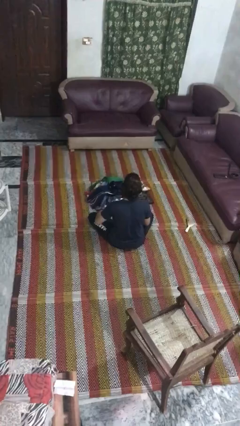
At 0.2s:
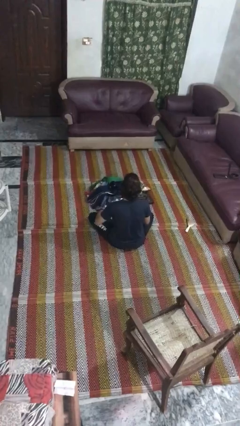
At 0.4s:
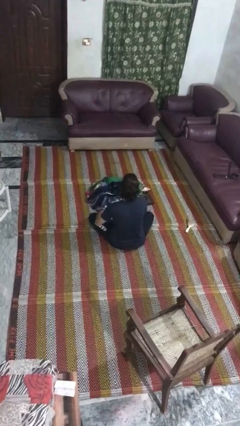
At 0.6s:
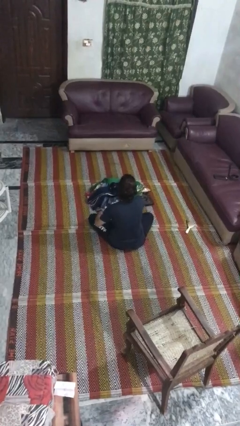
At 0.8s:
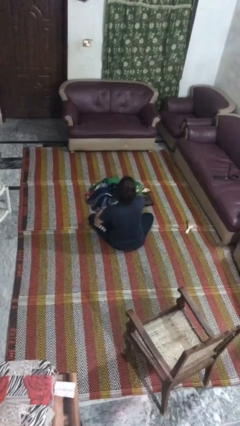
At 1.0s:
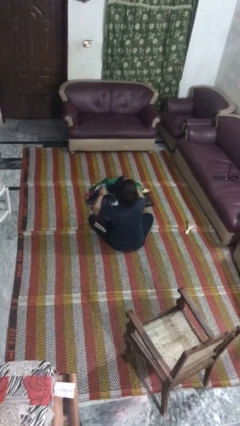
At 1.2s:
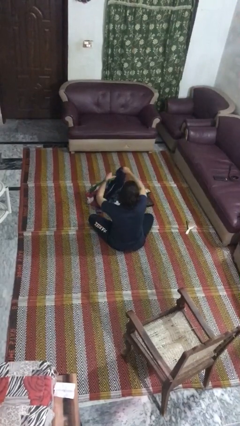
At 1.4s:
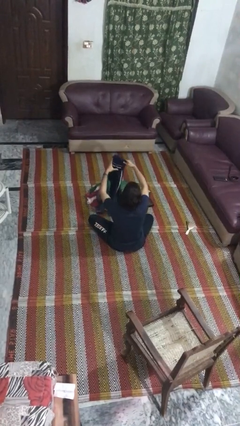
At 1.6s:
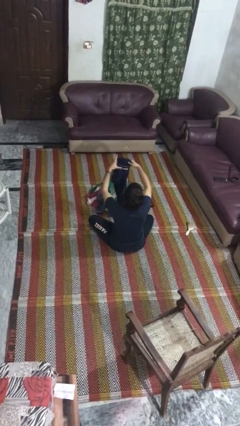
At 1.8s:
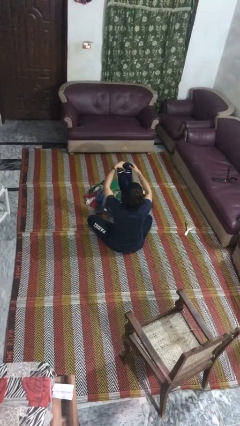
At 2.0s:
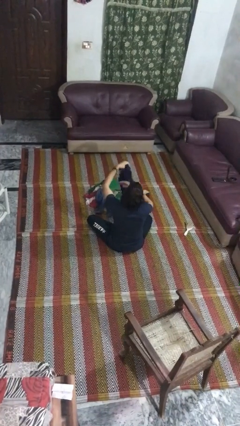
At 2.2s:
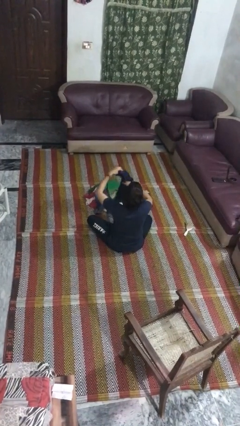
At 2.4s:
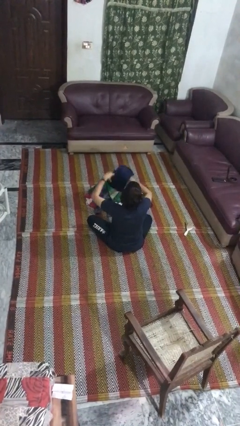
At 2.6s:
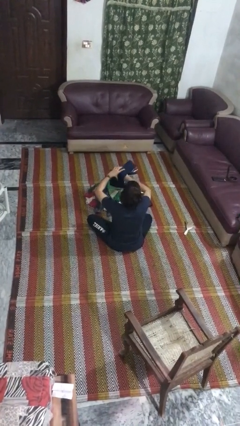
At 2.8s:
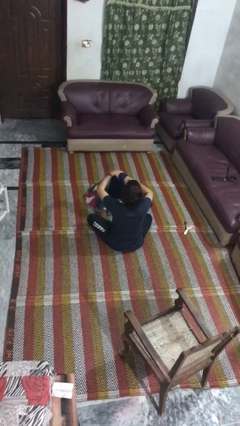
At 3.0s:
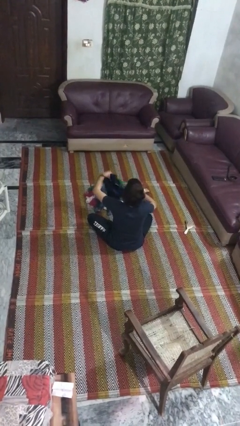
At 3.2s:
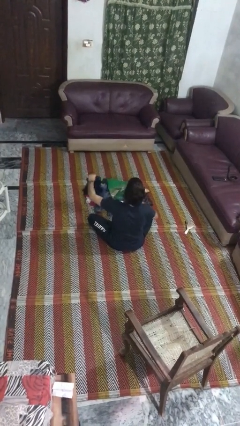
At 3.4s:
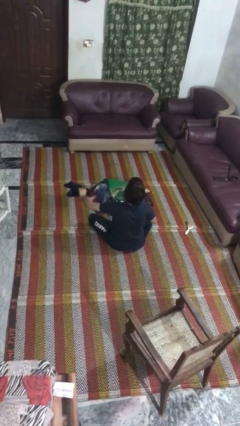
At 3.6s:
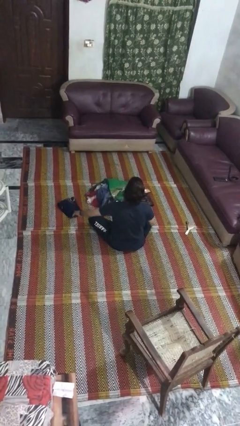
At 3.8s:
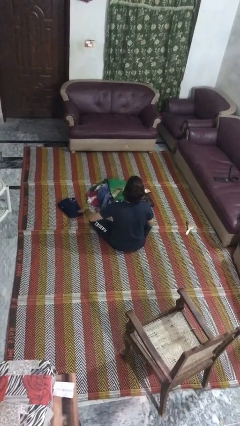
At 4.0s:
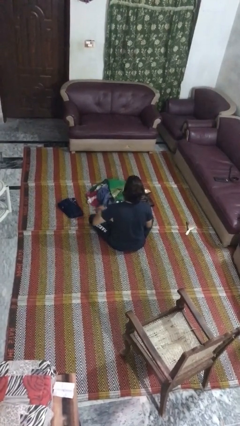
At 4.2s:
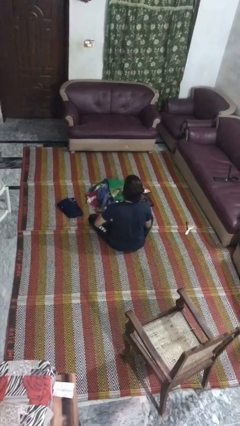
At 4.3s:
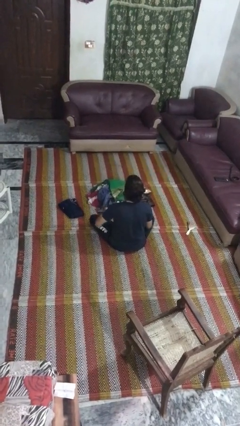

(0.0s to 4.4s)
person folds pants

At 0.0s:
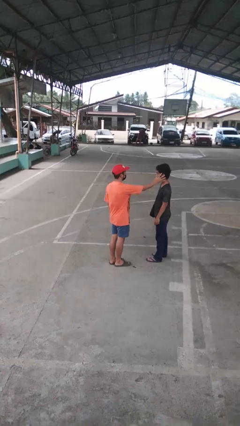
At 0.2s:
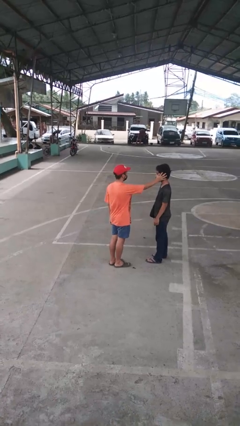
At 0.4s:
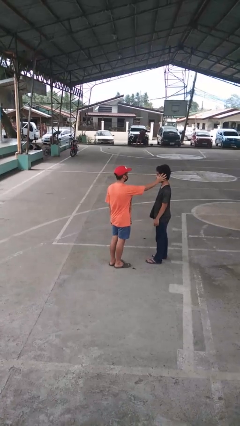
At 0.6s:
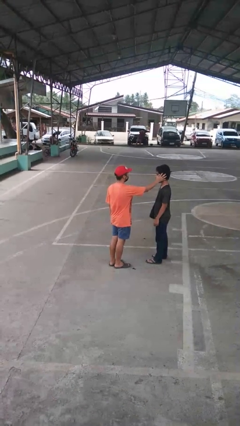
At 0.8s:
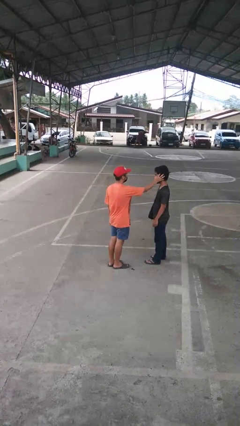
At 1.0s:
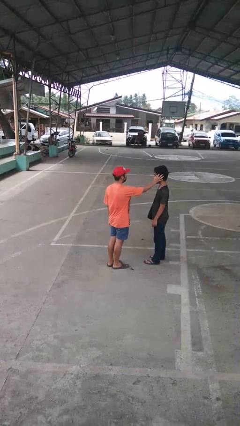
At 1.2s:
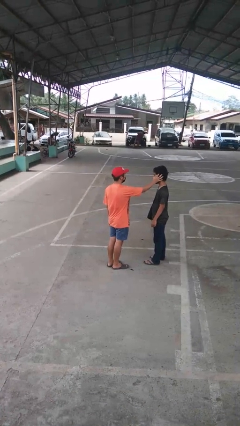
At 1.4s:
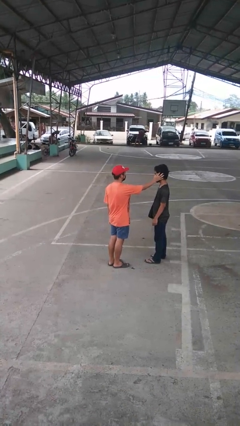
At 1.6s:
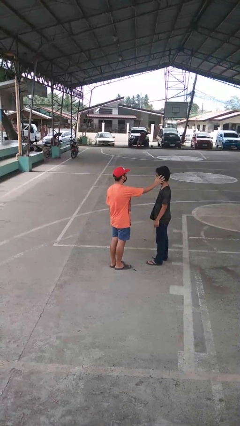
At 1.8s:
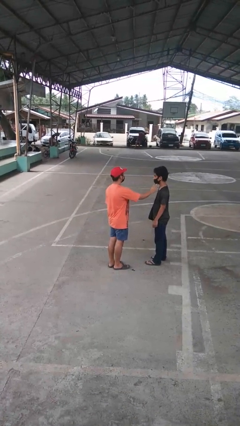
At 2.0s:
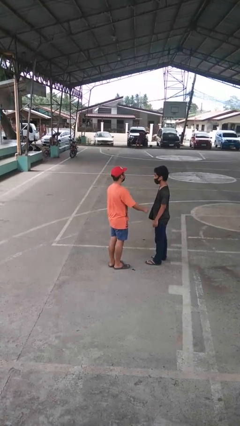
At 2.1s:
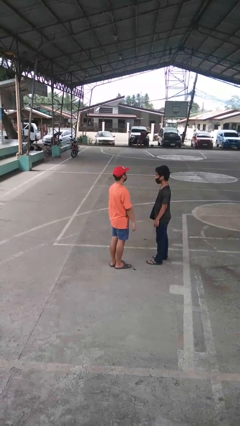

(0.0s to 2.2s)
person touches face of person

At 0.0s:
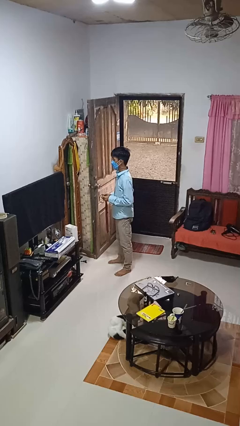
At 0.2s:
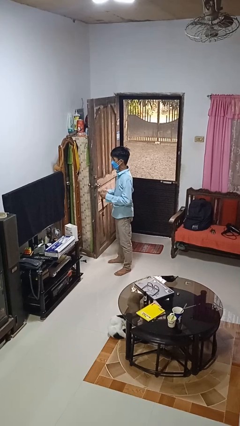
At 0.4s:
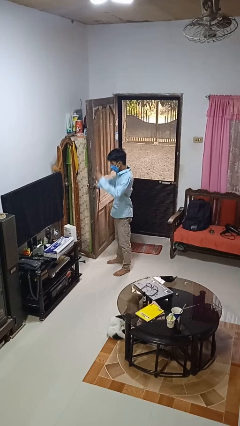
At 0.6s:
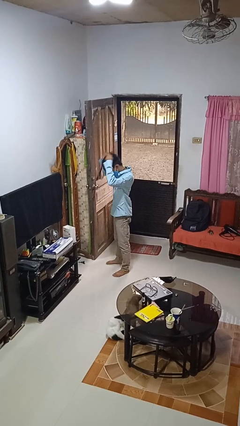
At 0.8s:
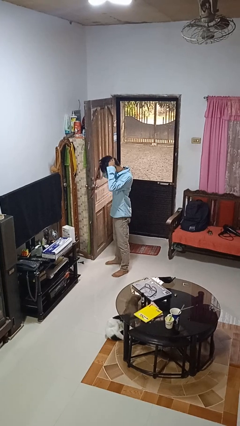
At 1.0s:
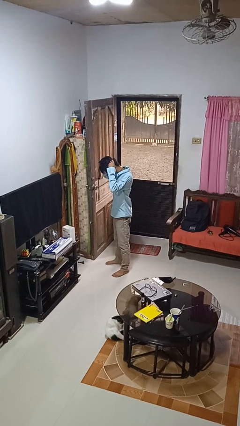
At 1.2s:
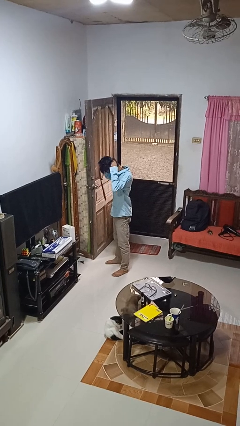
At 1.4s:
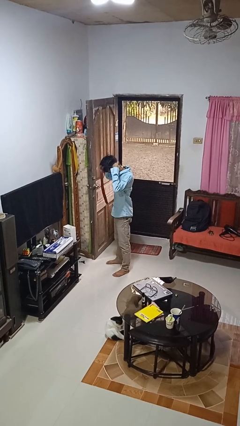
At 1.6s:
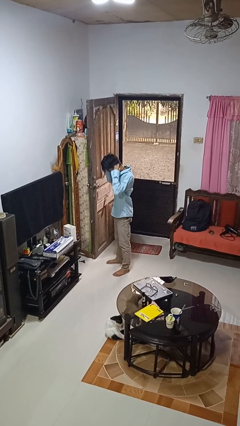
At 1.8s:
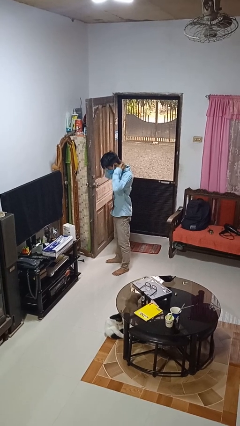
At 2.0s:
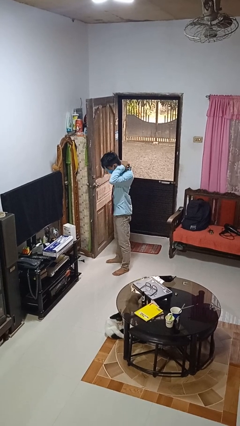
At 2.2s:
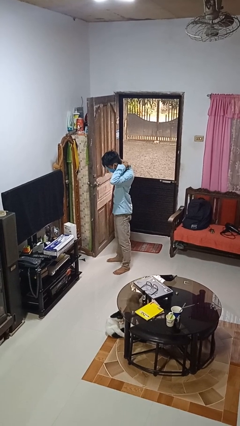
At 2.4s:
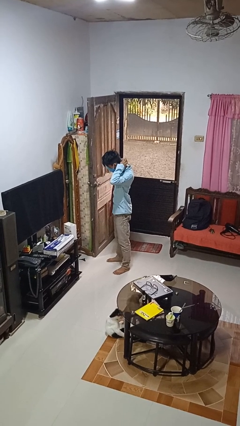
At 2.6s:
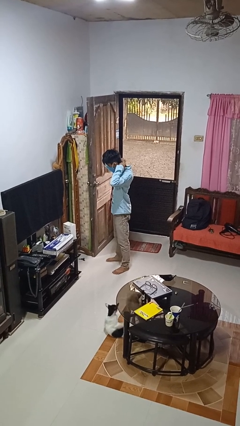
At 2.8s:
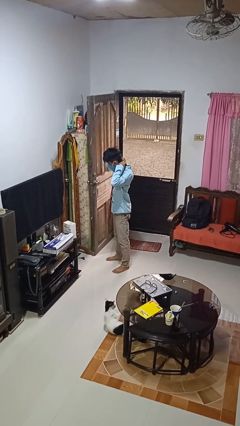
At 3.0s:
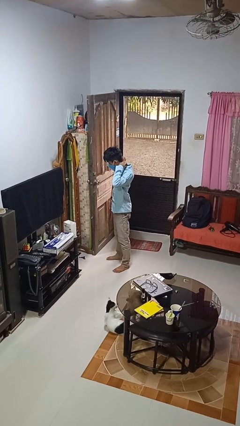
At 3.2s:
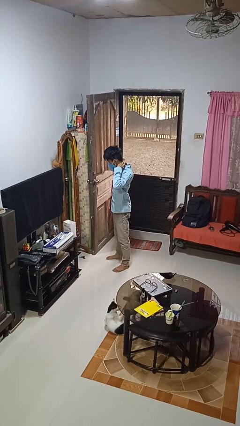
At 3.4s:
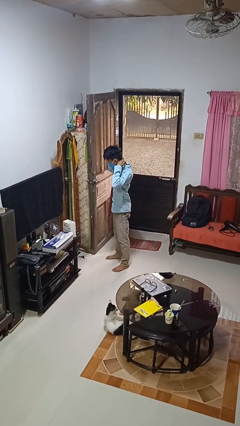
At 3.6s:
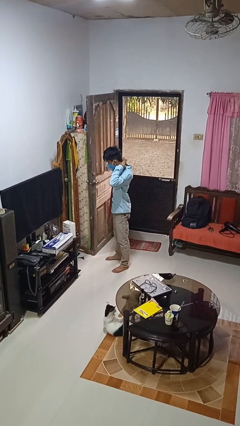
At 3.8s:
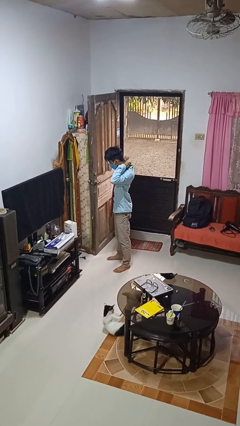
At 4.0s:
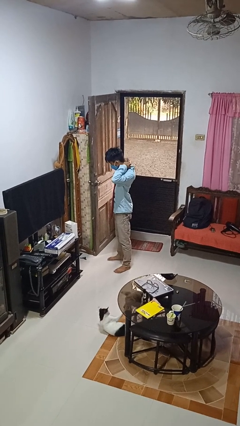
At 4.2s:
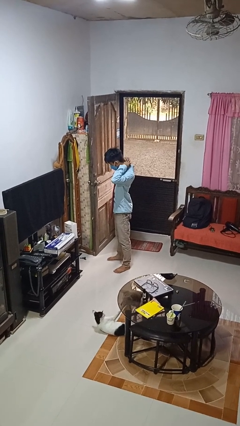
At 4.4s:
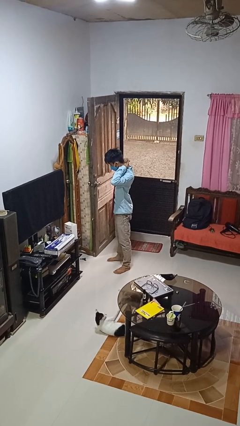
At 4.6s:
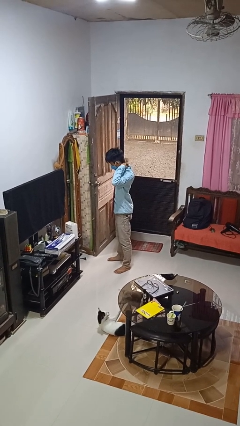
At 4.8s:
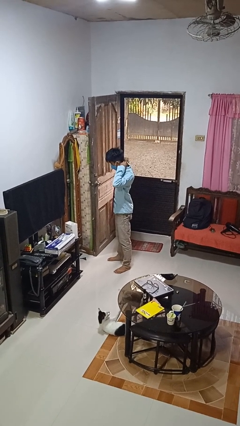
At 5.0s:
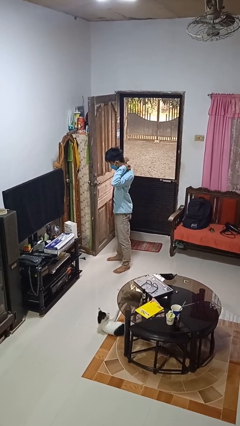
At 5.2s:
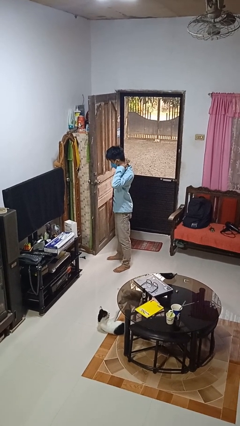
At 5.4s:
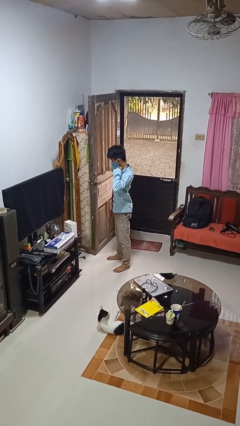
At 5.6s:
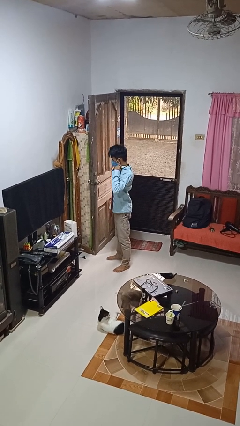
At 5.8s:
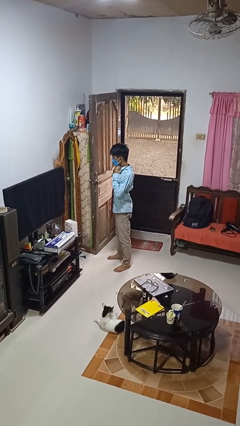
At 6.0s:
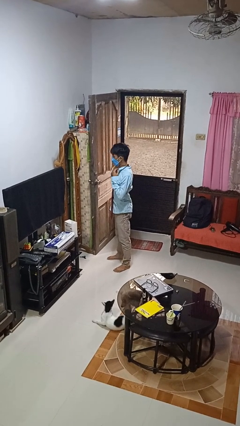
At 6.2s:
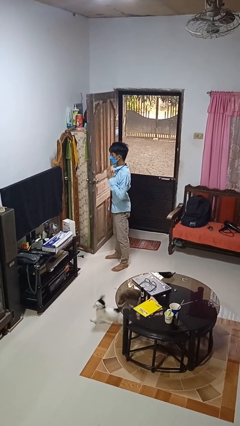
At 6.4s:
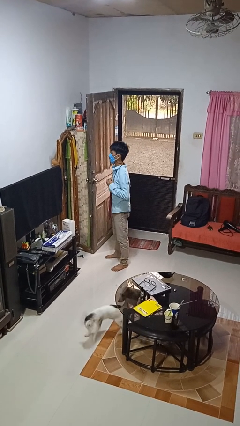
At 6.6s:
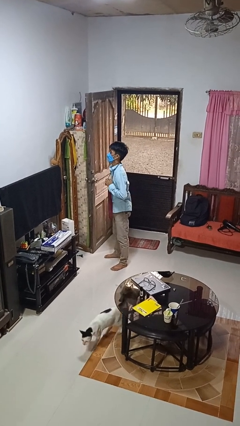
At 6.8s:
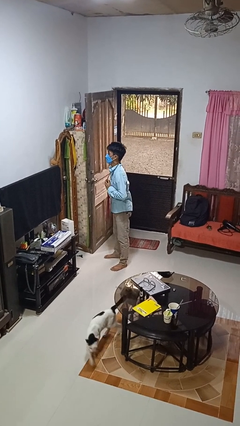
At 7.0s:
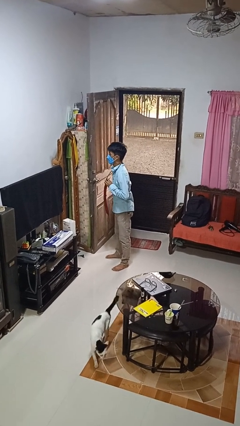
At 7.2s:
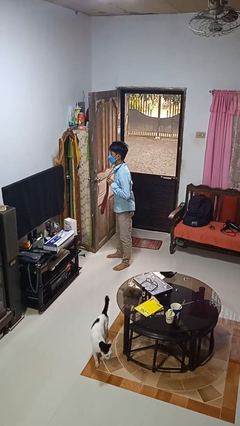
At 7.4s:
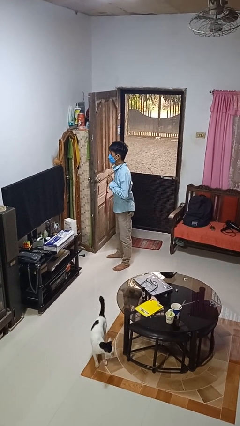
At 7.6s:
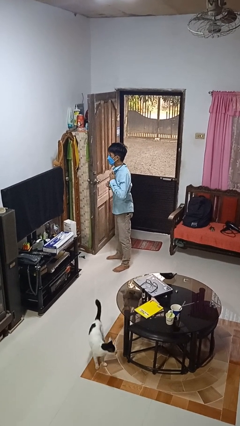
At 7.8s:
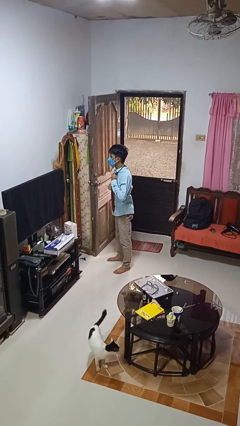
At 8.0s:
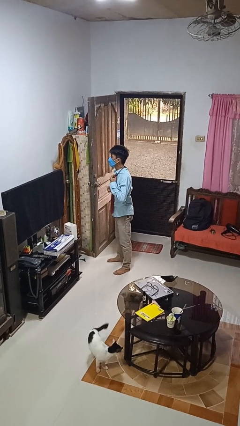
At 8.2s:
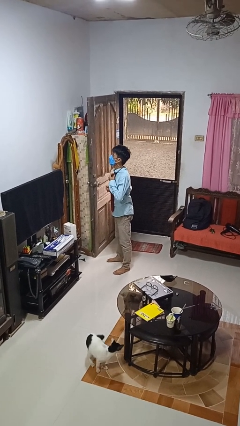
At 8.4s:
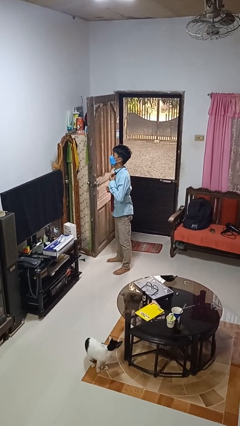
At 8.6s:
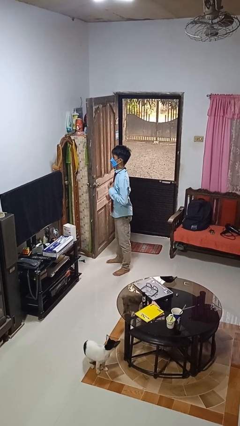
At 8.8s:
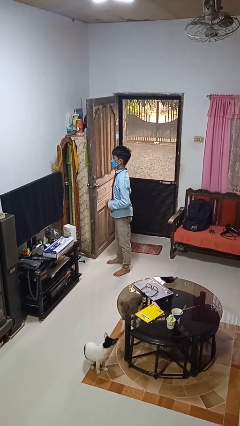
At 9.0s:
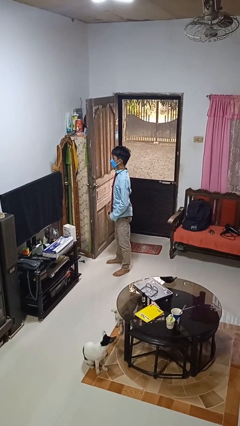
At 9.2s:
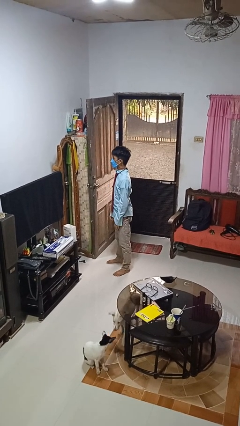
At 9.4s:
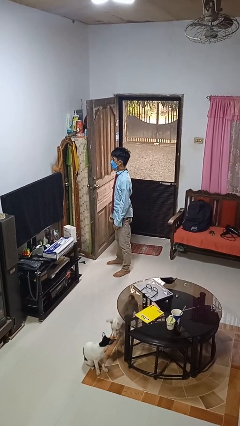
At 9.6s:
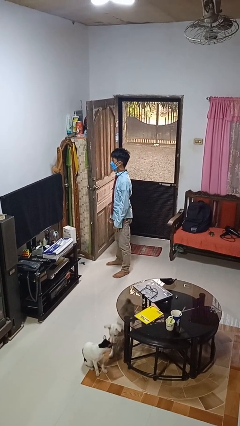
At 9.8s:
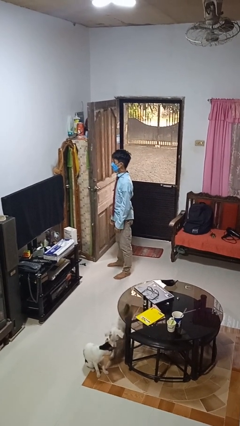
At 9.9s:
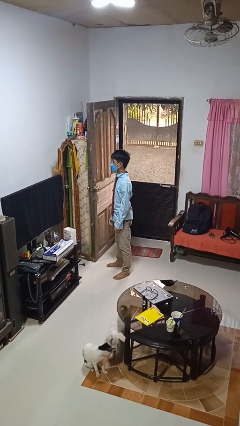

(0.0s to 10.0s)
person puts on necktie

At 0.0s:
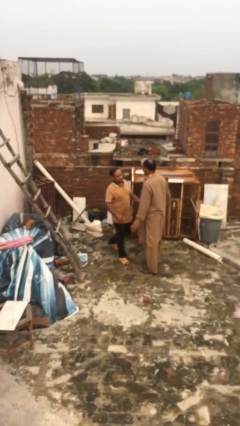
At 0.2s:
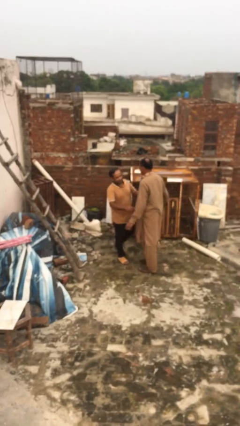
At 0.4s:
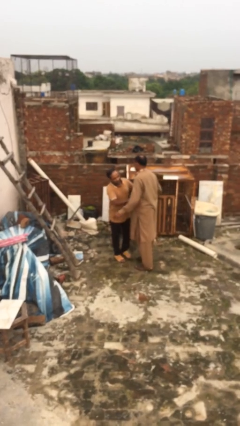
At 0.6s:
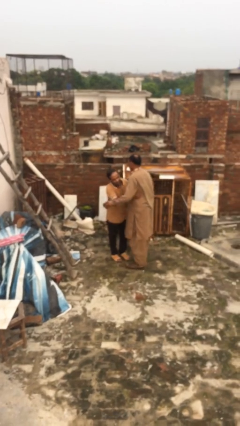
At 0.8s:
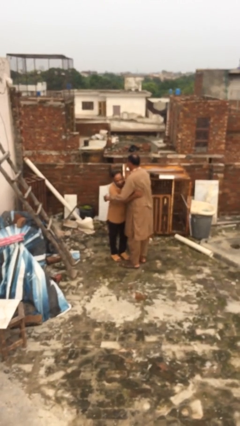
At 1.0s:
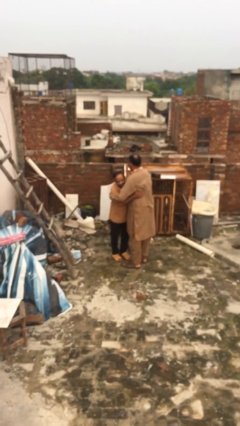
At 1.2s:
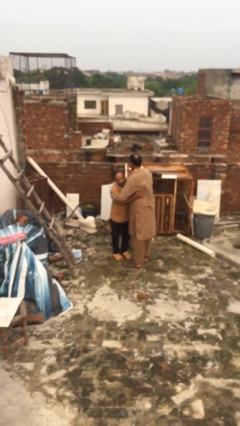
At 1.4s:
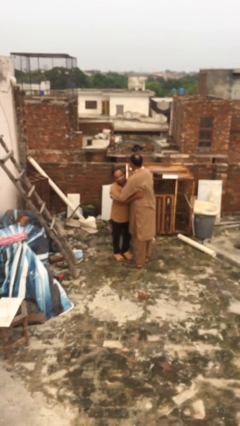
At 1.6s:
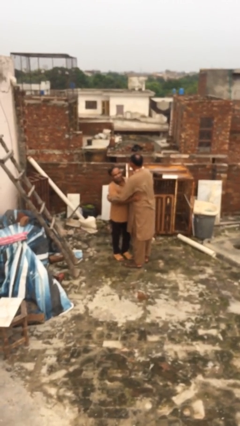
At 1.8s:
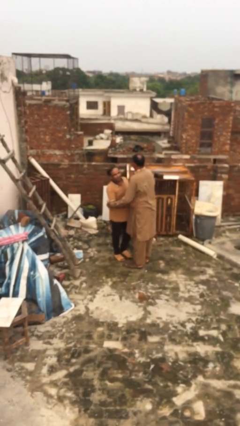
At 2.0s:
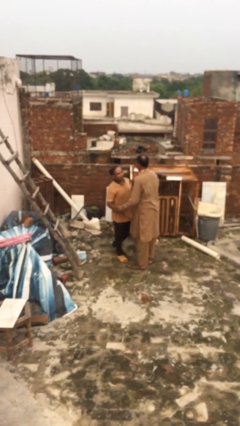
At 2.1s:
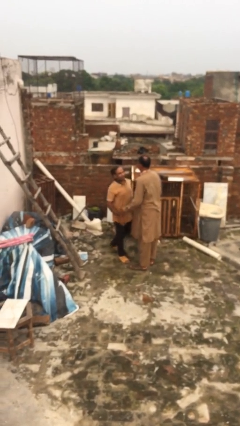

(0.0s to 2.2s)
person embraces person
